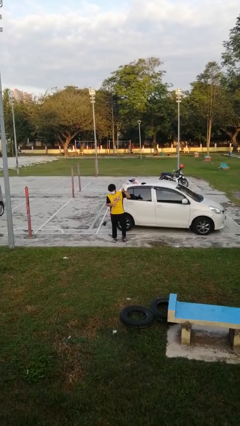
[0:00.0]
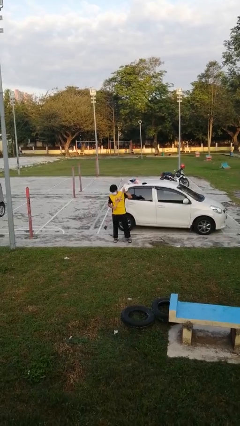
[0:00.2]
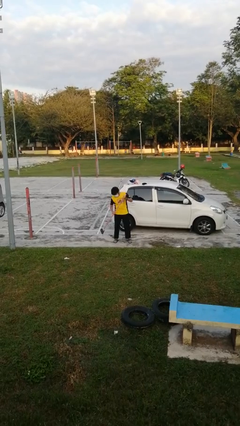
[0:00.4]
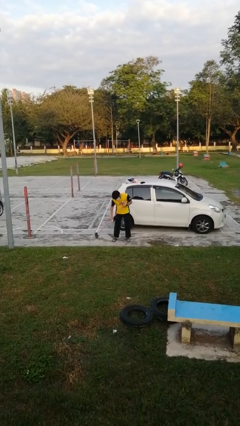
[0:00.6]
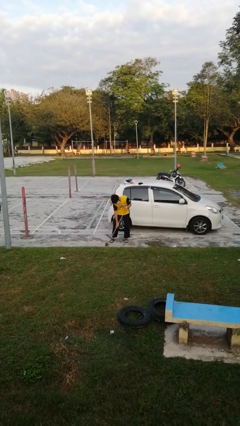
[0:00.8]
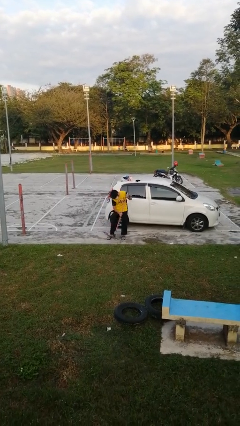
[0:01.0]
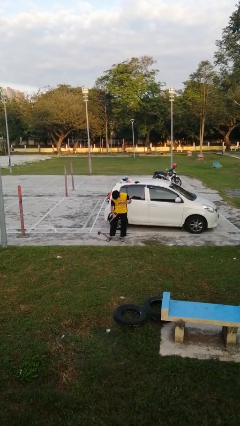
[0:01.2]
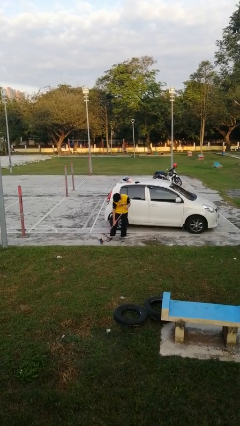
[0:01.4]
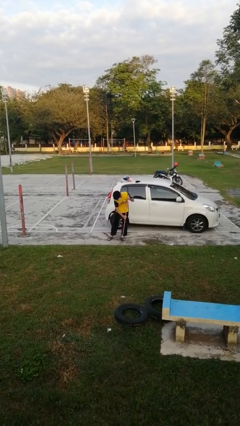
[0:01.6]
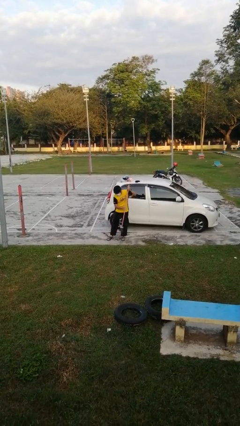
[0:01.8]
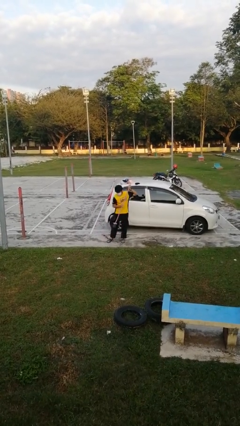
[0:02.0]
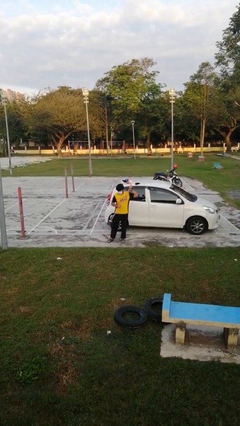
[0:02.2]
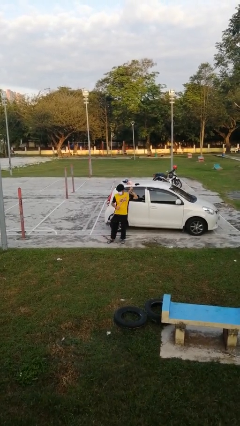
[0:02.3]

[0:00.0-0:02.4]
person sweeps floor

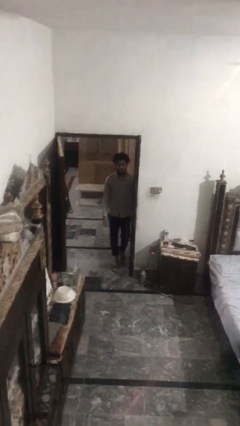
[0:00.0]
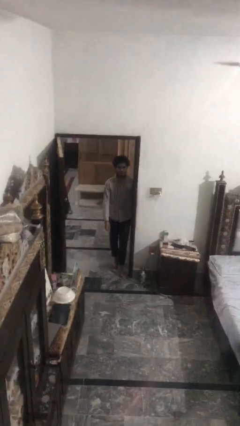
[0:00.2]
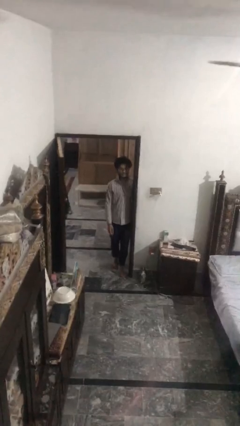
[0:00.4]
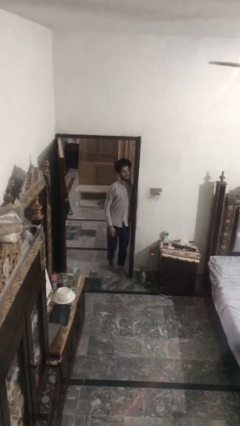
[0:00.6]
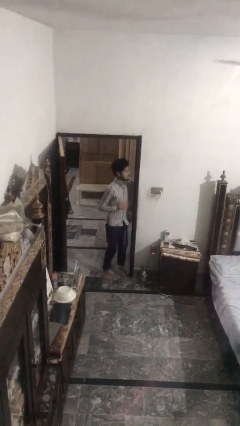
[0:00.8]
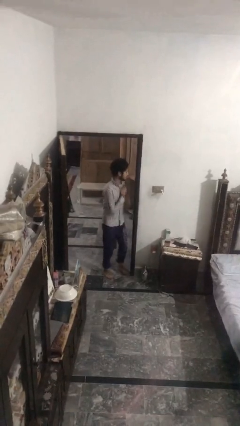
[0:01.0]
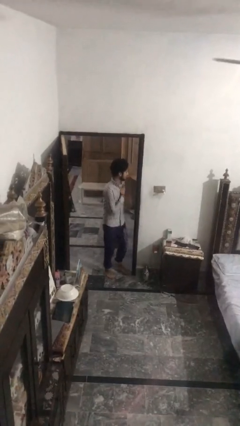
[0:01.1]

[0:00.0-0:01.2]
person bumps into wall

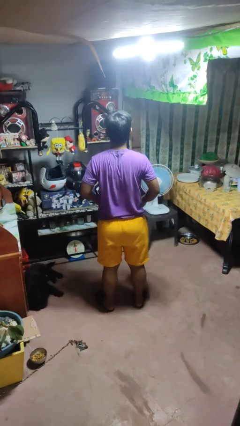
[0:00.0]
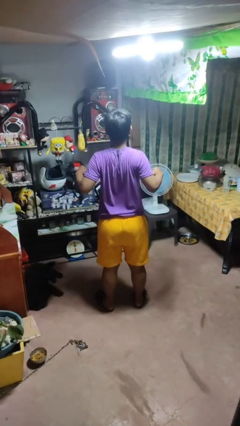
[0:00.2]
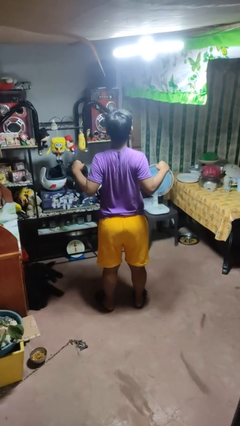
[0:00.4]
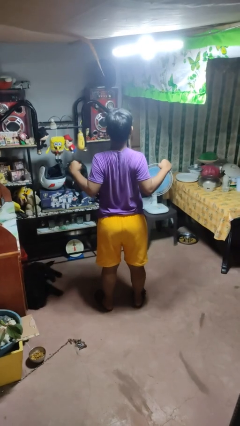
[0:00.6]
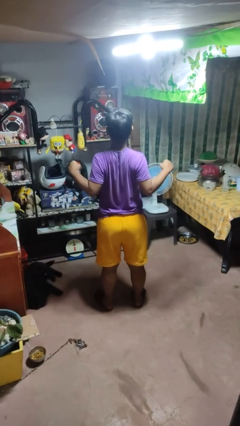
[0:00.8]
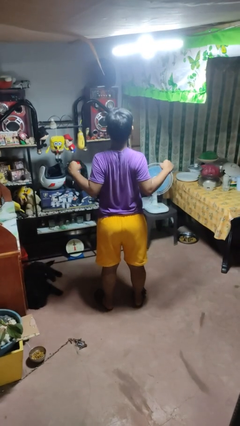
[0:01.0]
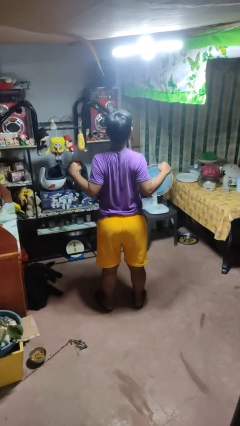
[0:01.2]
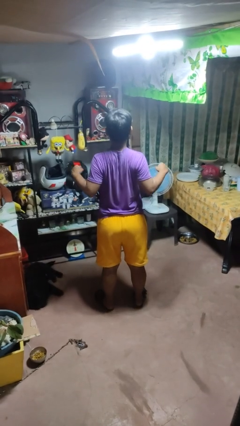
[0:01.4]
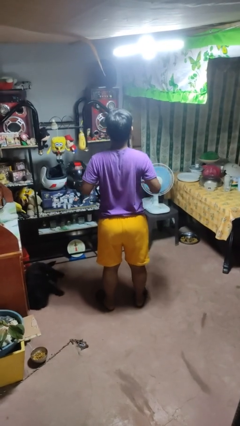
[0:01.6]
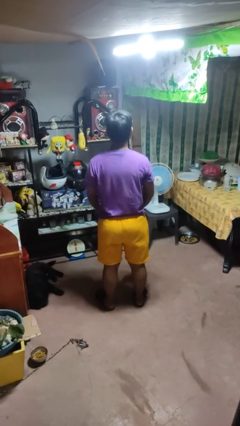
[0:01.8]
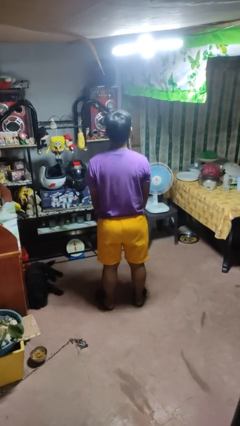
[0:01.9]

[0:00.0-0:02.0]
person stretches back

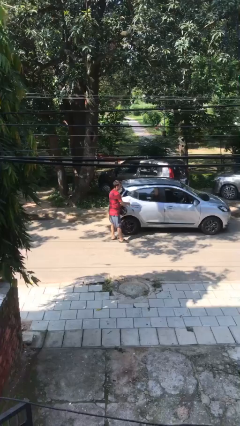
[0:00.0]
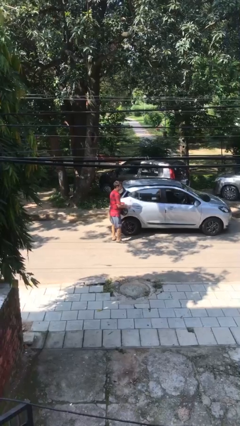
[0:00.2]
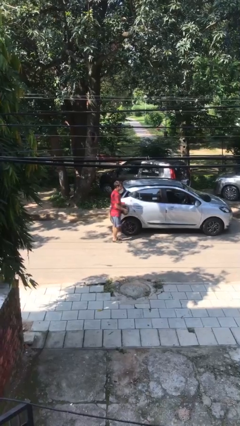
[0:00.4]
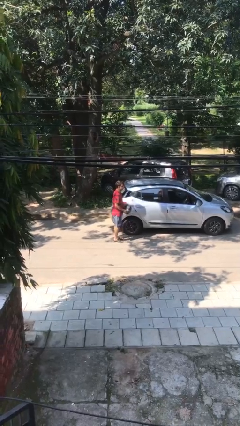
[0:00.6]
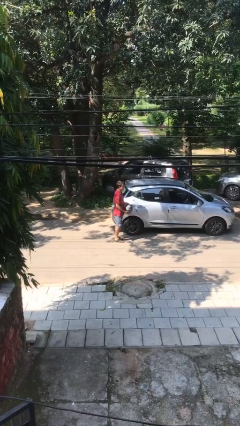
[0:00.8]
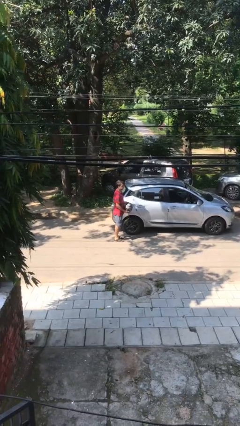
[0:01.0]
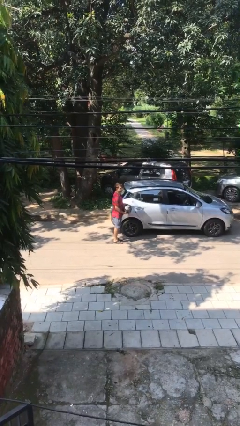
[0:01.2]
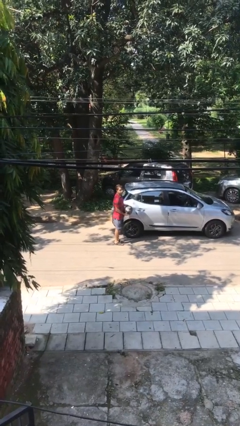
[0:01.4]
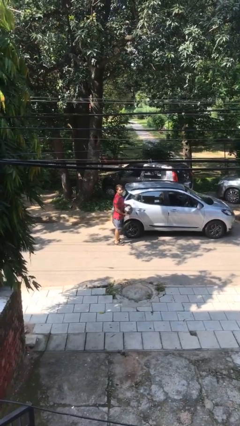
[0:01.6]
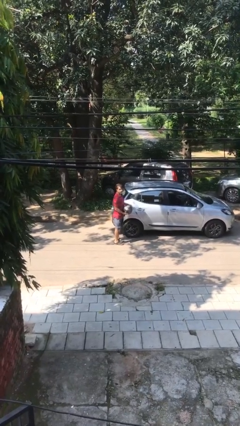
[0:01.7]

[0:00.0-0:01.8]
person closes car door

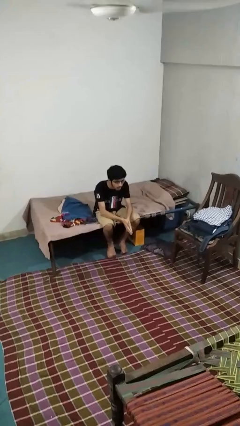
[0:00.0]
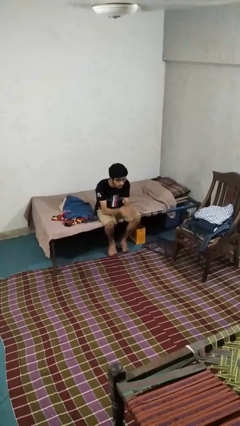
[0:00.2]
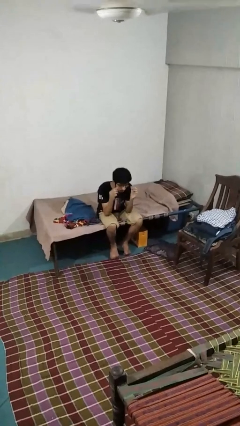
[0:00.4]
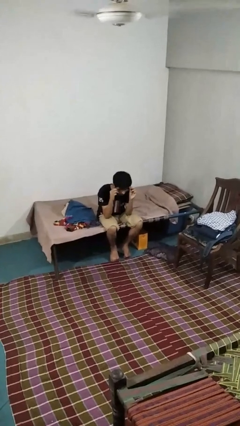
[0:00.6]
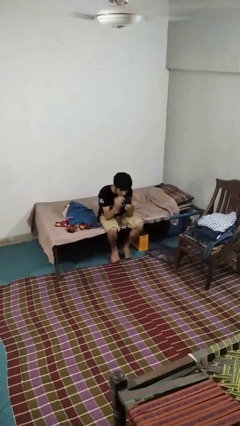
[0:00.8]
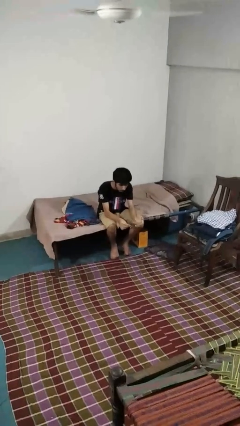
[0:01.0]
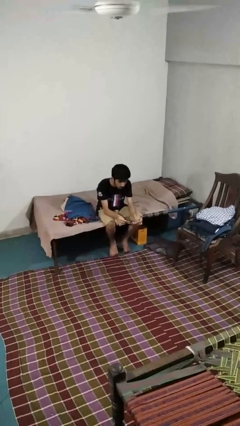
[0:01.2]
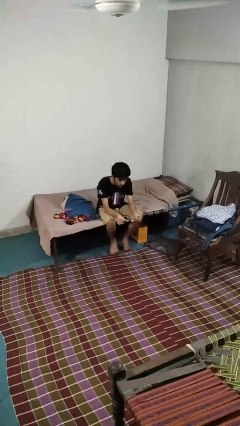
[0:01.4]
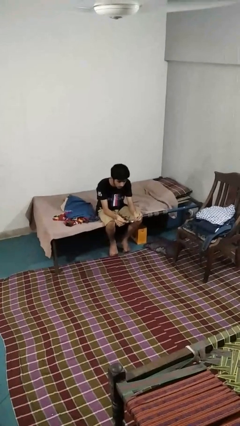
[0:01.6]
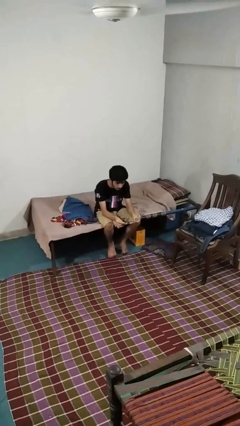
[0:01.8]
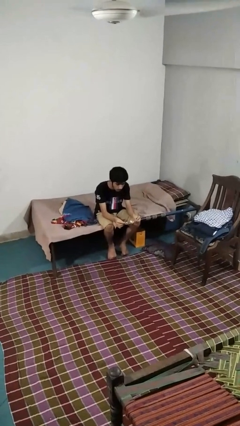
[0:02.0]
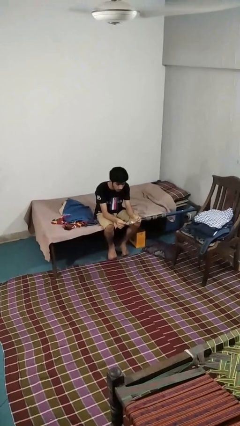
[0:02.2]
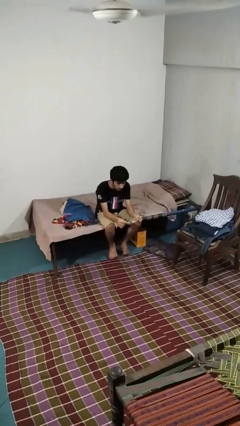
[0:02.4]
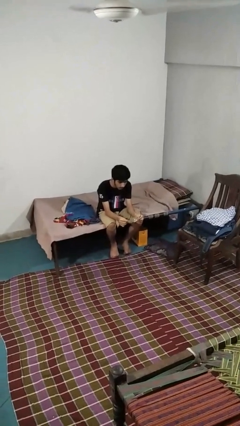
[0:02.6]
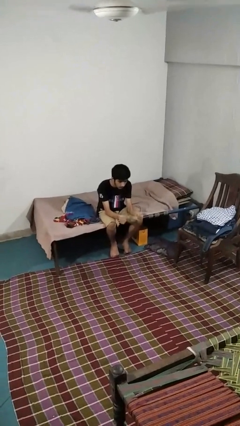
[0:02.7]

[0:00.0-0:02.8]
person takes off glasses

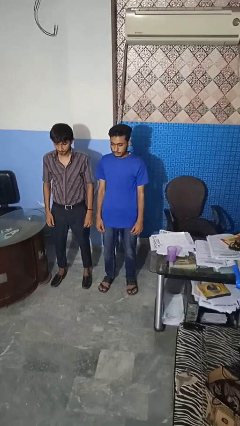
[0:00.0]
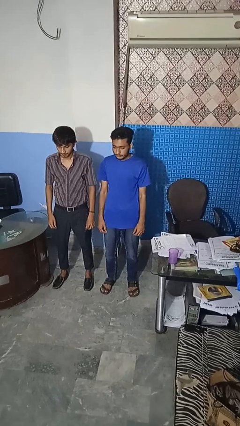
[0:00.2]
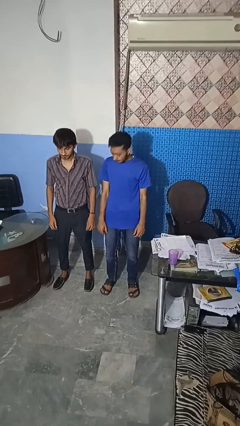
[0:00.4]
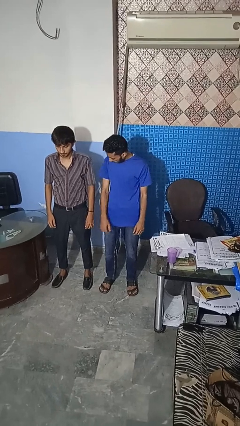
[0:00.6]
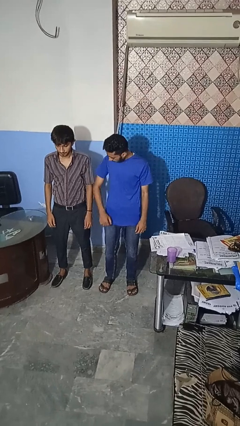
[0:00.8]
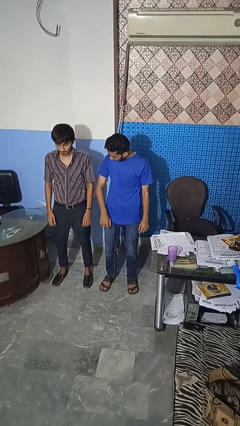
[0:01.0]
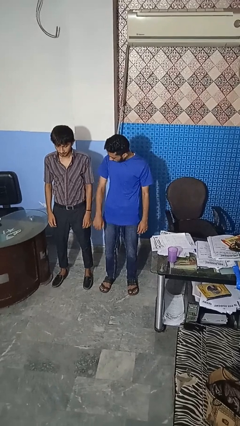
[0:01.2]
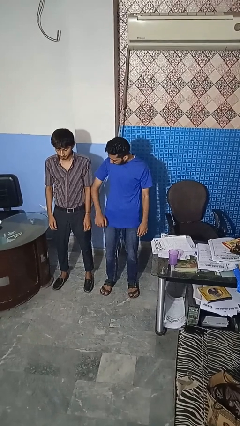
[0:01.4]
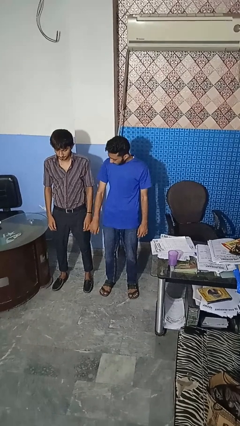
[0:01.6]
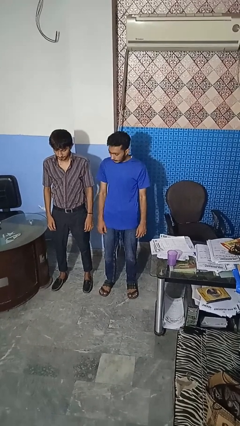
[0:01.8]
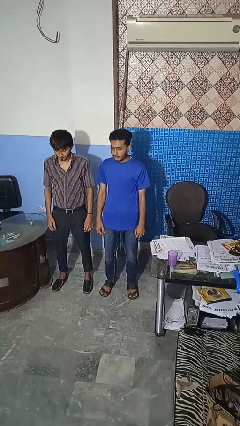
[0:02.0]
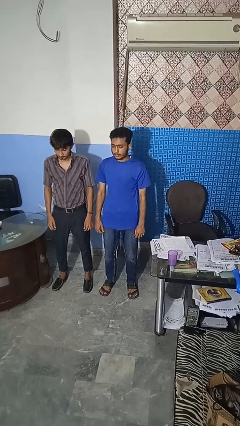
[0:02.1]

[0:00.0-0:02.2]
person nudges person with elbow

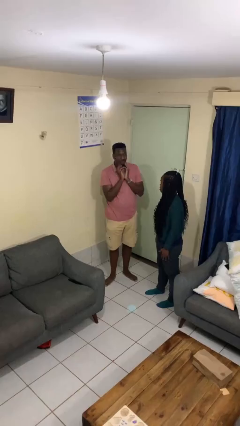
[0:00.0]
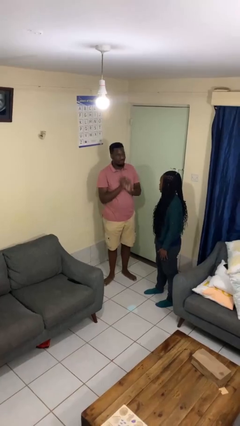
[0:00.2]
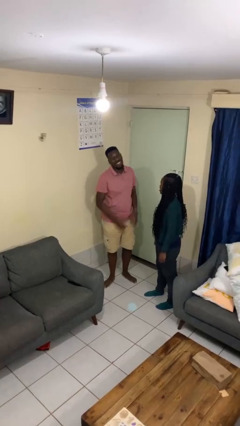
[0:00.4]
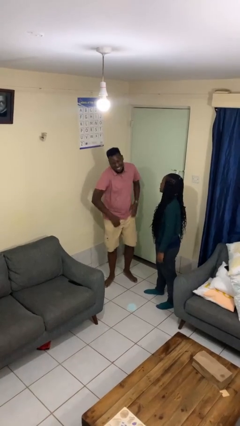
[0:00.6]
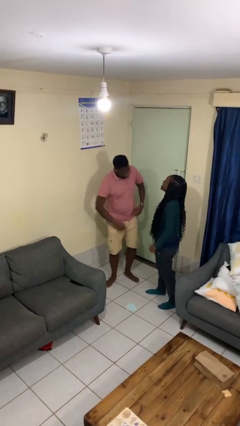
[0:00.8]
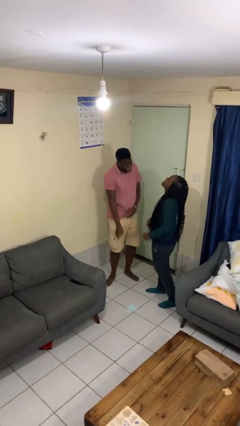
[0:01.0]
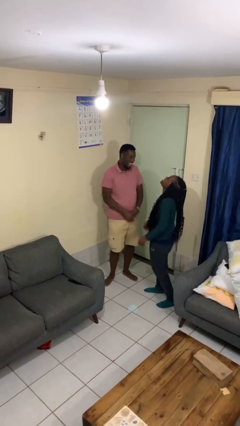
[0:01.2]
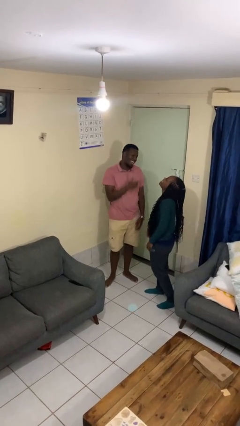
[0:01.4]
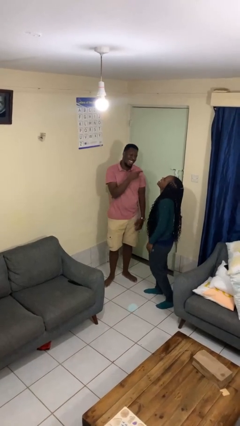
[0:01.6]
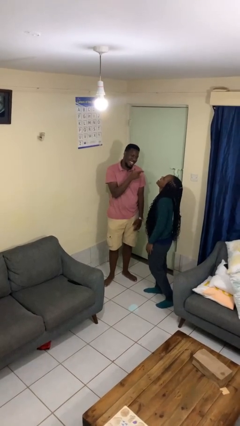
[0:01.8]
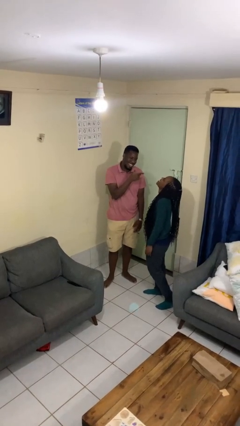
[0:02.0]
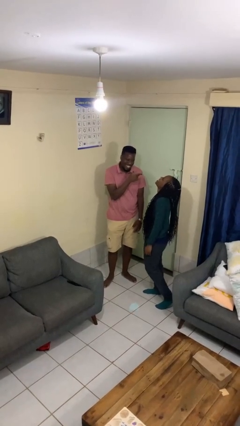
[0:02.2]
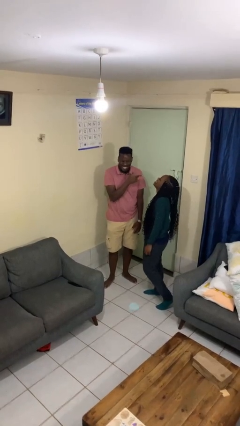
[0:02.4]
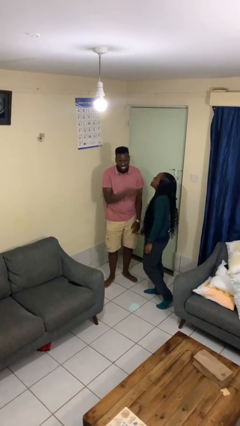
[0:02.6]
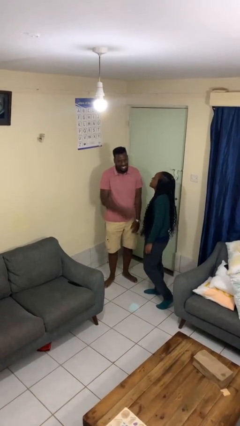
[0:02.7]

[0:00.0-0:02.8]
person laughs with person

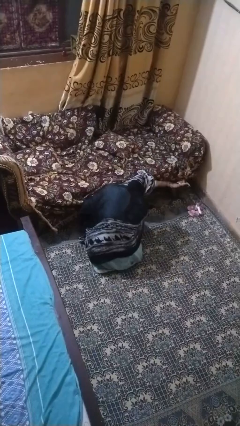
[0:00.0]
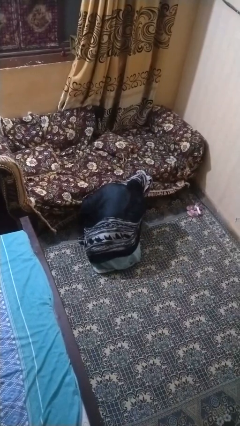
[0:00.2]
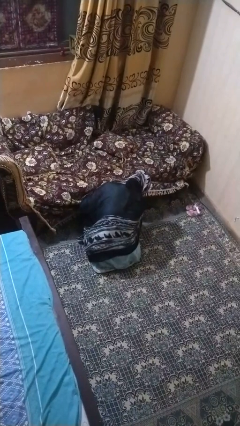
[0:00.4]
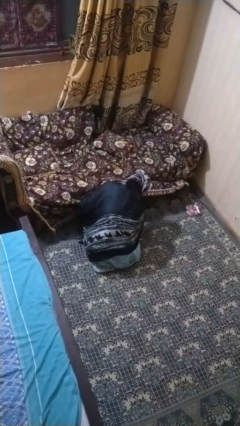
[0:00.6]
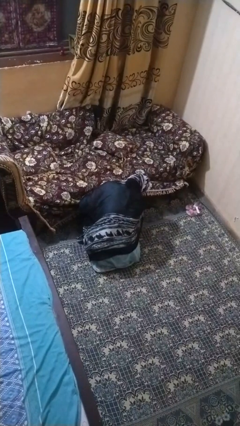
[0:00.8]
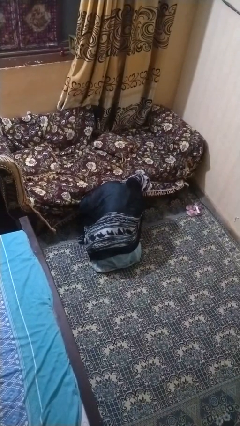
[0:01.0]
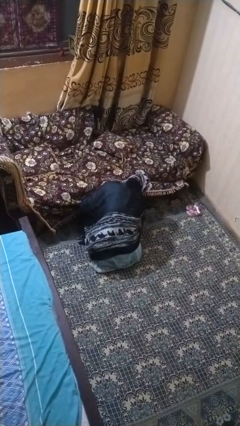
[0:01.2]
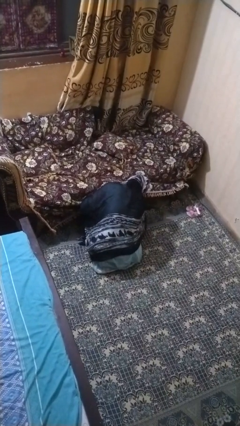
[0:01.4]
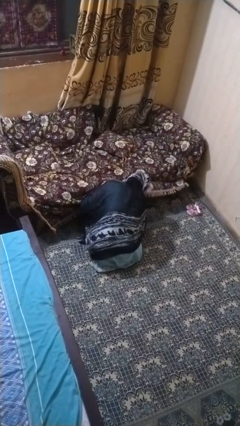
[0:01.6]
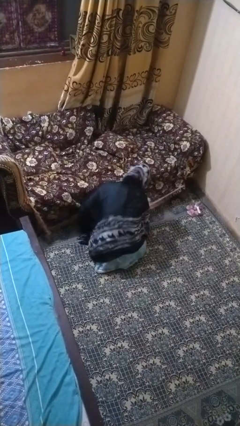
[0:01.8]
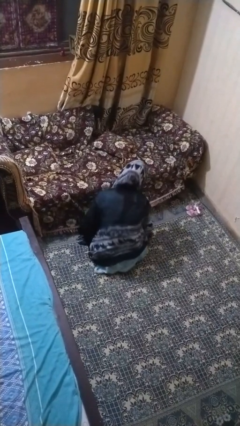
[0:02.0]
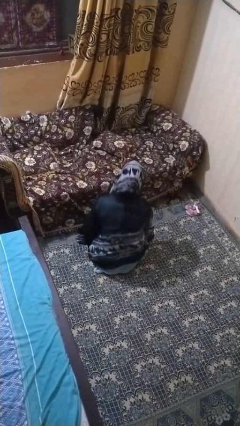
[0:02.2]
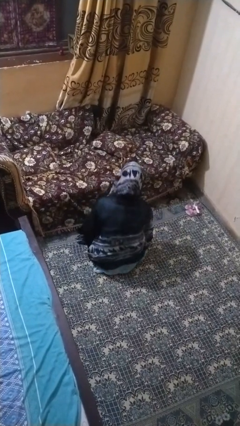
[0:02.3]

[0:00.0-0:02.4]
person searches under couch
